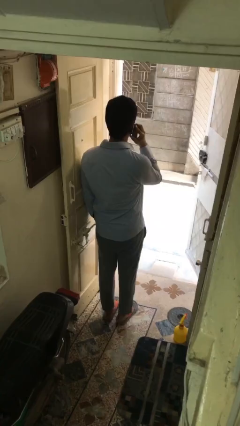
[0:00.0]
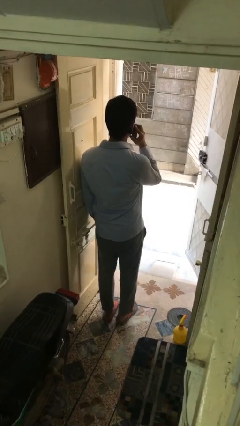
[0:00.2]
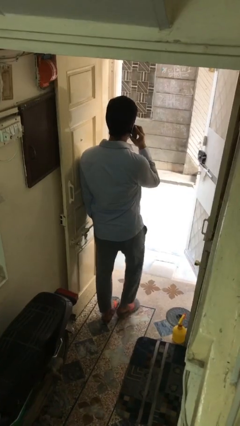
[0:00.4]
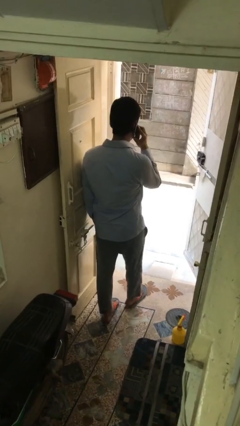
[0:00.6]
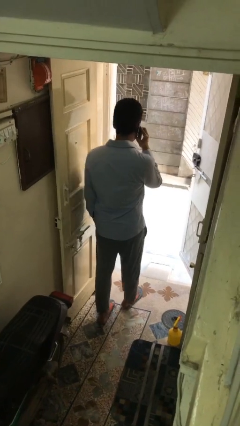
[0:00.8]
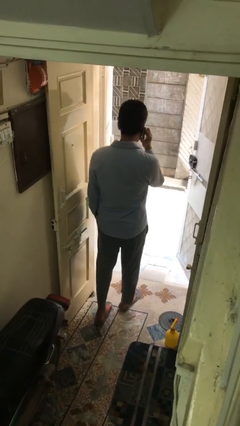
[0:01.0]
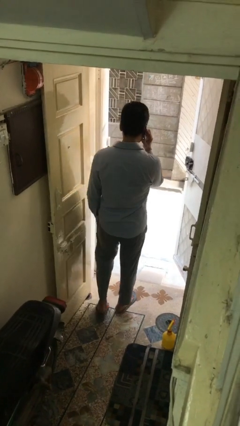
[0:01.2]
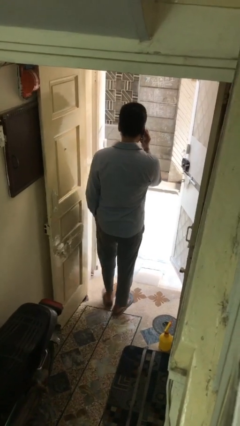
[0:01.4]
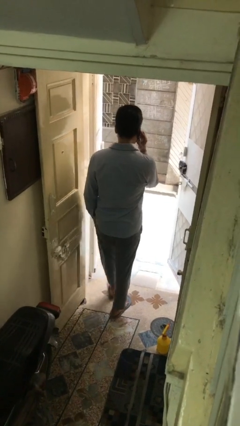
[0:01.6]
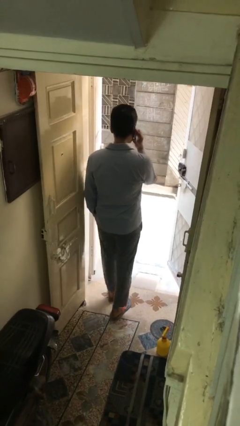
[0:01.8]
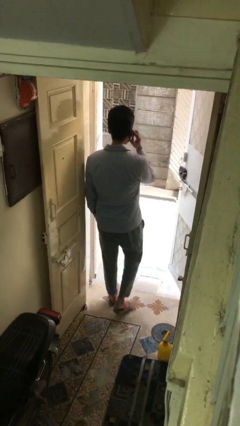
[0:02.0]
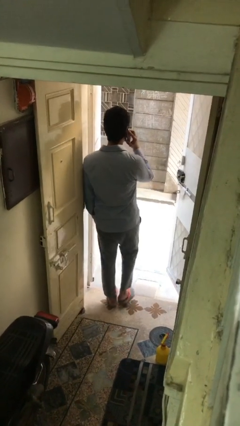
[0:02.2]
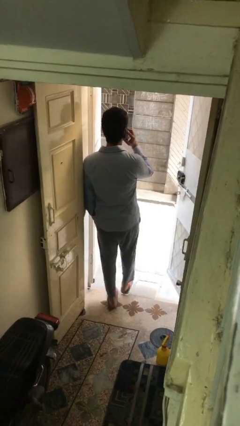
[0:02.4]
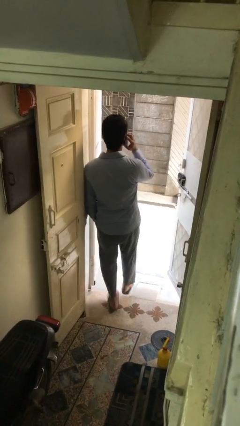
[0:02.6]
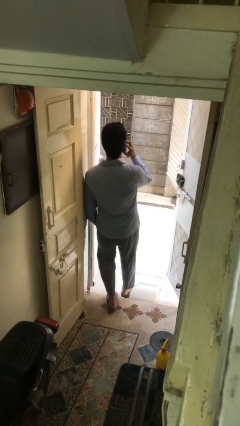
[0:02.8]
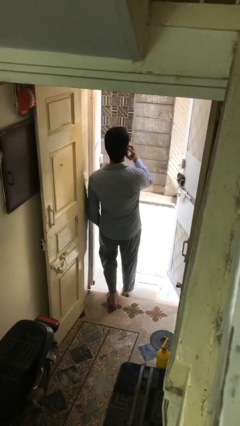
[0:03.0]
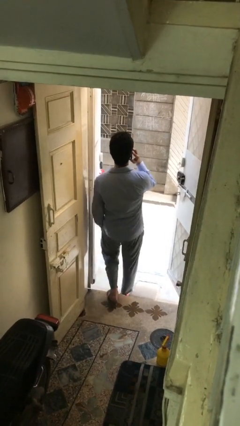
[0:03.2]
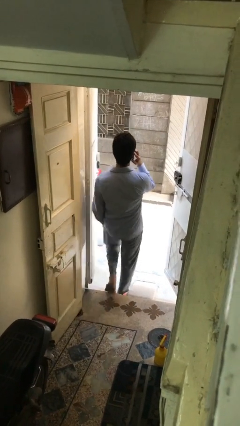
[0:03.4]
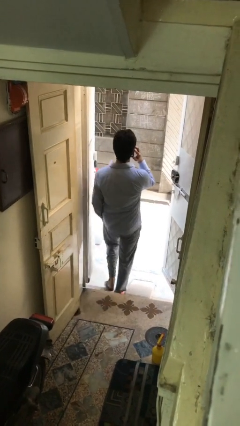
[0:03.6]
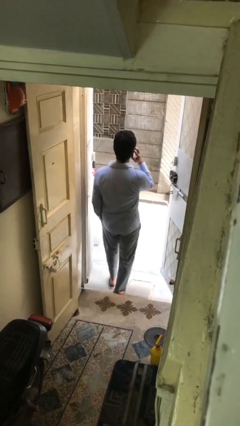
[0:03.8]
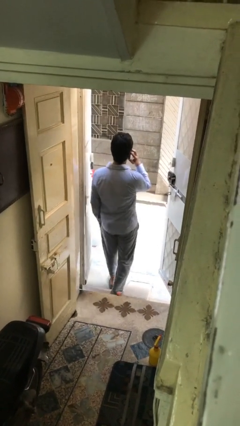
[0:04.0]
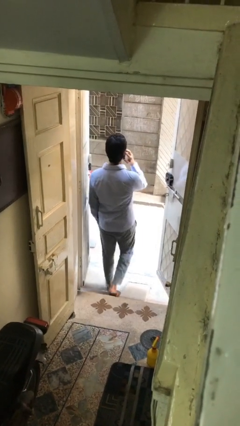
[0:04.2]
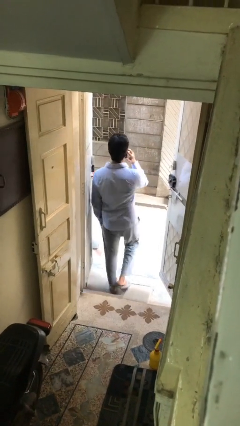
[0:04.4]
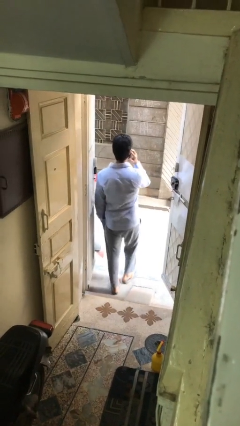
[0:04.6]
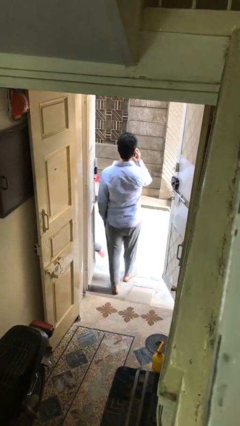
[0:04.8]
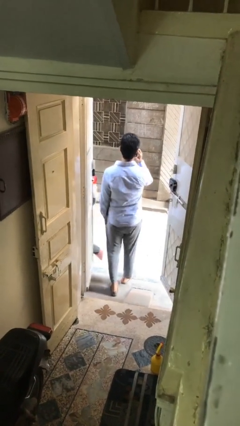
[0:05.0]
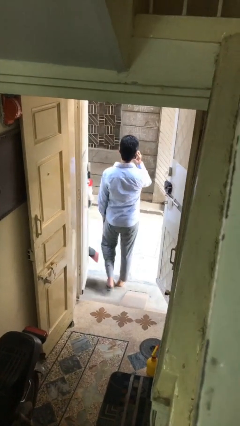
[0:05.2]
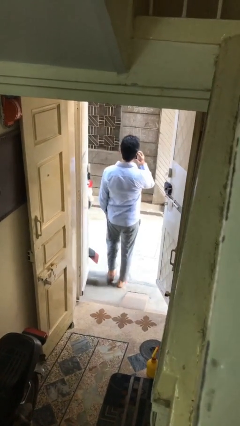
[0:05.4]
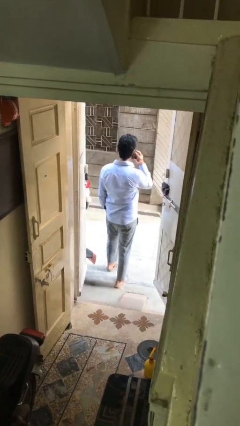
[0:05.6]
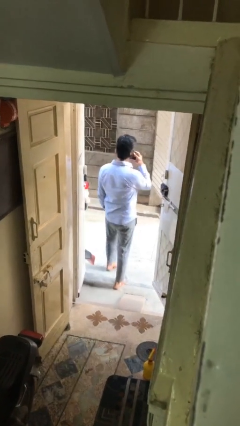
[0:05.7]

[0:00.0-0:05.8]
person exits scene through structure

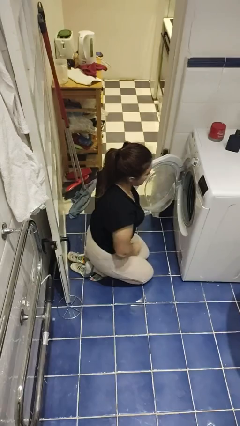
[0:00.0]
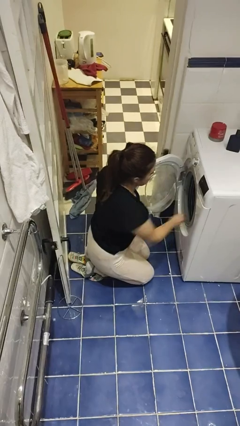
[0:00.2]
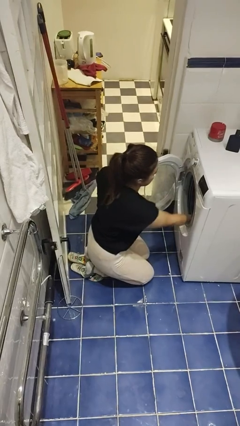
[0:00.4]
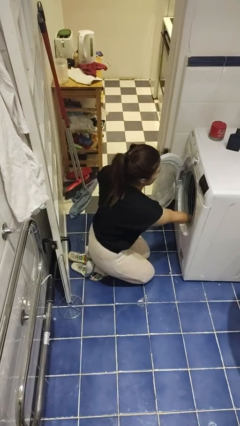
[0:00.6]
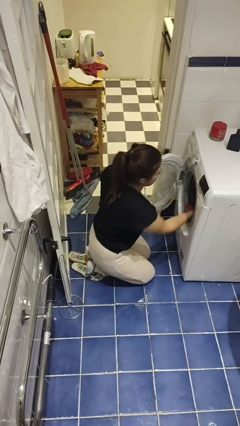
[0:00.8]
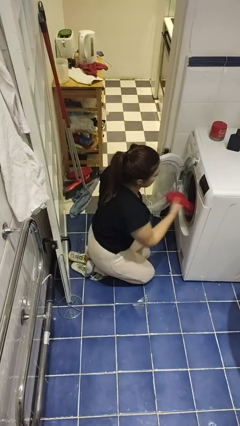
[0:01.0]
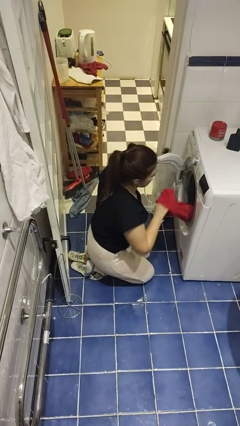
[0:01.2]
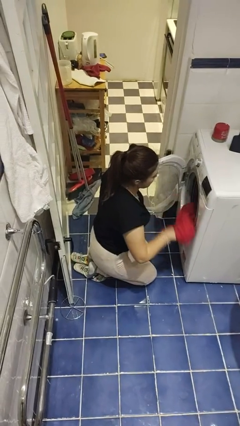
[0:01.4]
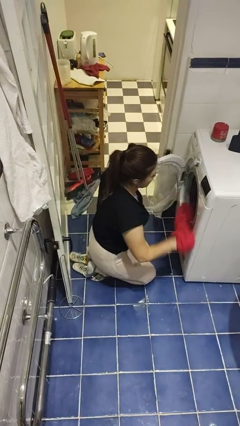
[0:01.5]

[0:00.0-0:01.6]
person unloads dryer

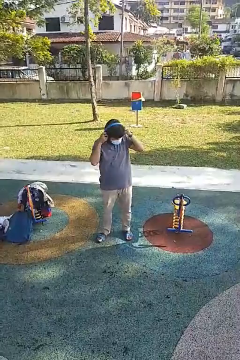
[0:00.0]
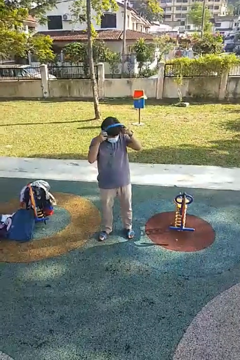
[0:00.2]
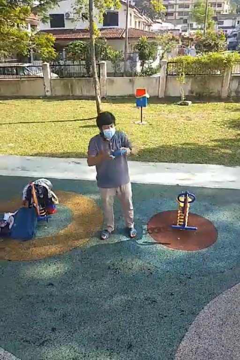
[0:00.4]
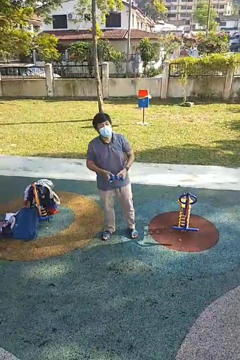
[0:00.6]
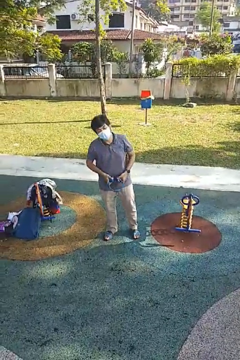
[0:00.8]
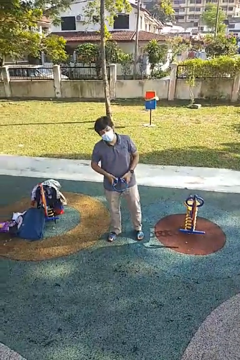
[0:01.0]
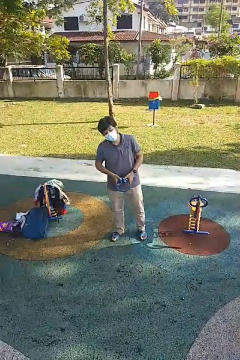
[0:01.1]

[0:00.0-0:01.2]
person puts on headphones

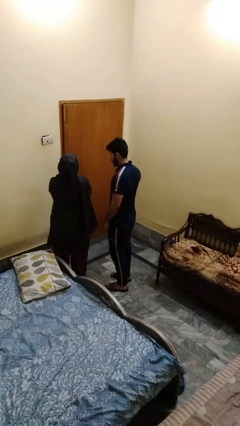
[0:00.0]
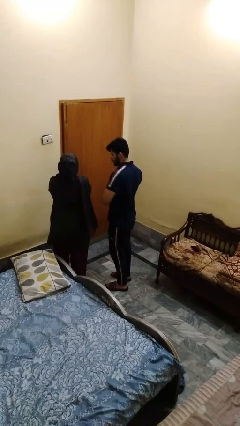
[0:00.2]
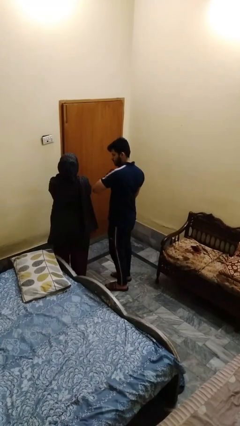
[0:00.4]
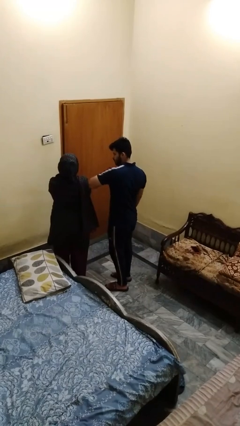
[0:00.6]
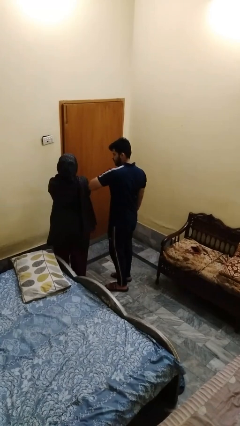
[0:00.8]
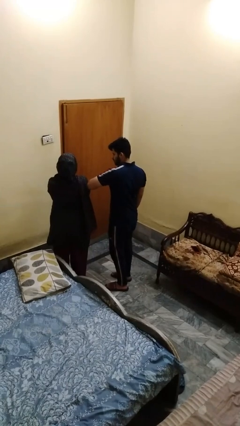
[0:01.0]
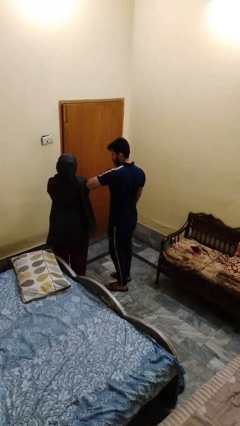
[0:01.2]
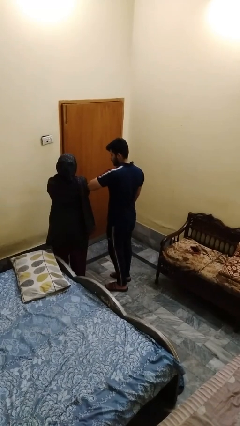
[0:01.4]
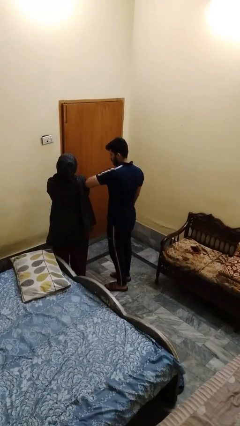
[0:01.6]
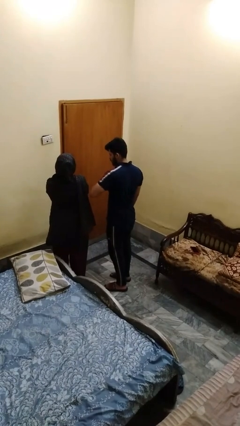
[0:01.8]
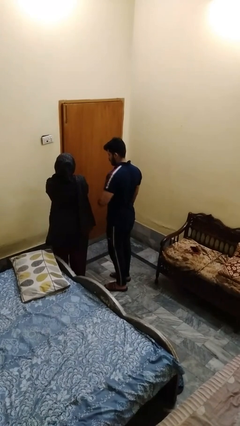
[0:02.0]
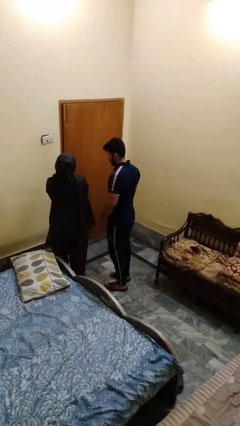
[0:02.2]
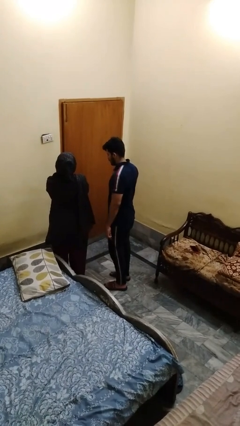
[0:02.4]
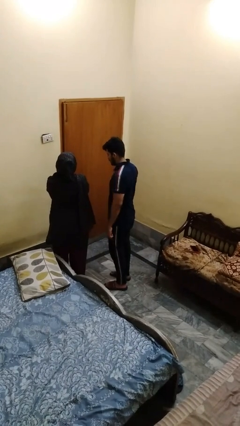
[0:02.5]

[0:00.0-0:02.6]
person nudges person with elbow

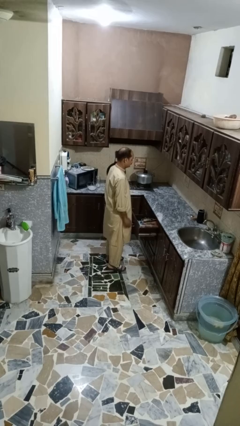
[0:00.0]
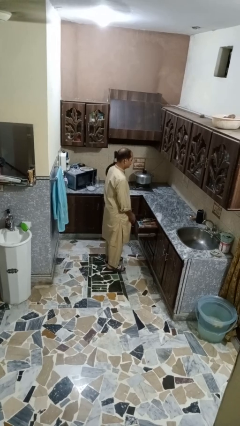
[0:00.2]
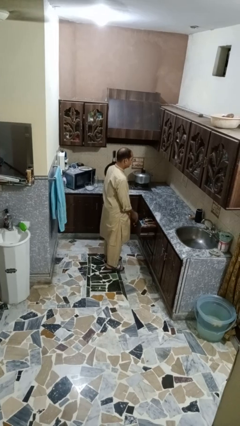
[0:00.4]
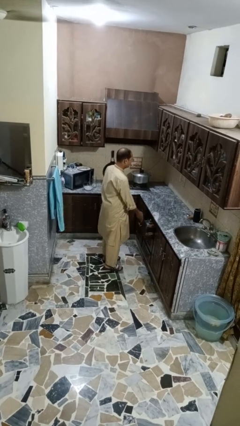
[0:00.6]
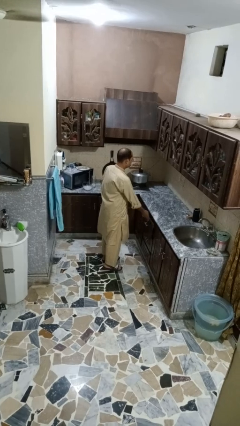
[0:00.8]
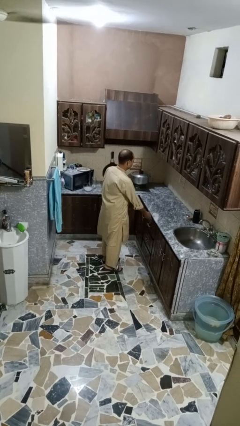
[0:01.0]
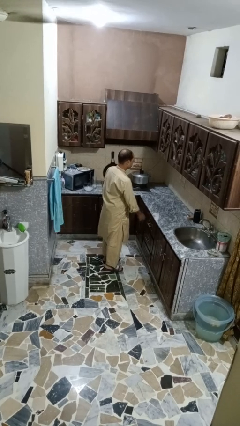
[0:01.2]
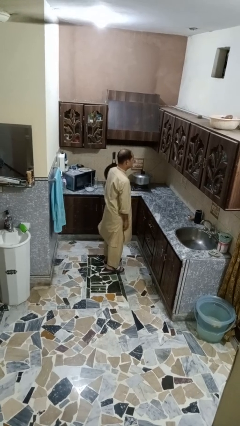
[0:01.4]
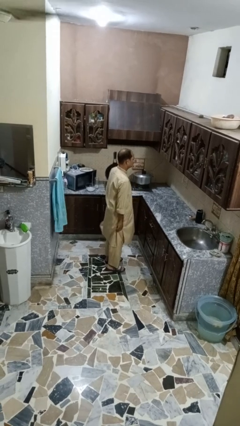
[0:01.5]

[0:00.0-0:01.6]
person closes kitchen drawer

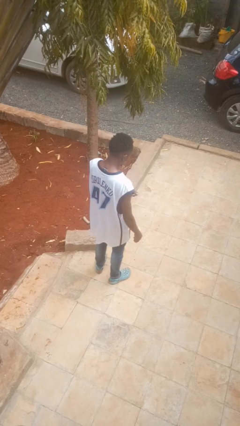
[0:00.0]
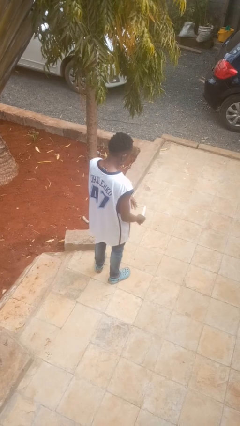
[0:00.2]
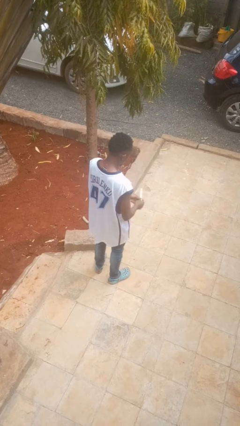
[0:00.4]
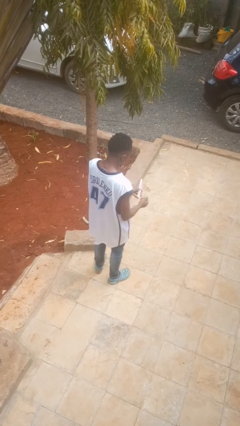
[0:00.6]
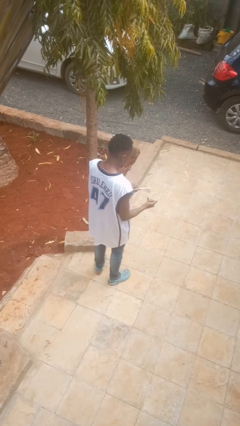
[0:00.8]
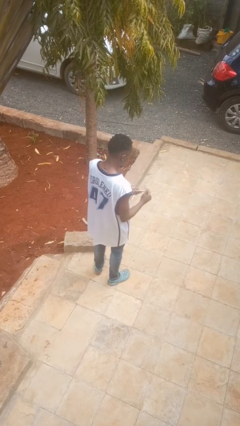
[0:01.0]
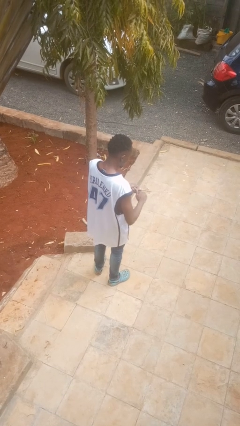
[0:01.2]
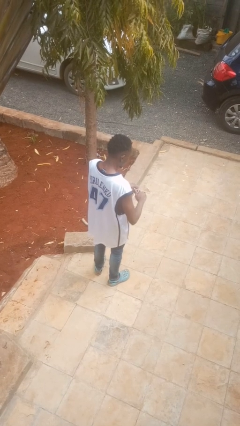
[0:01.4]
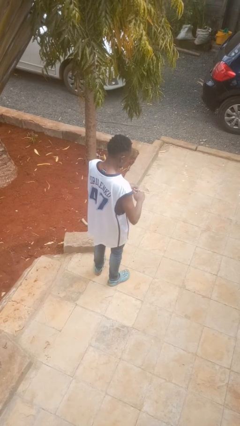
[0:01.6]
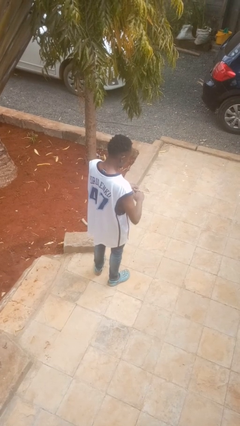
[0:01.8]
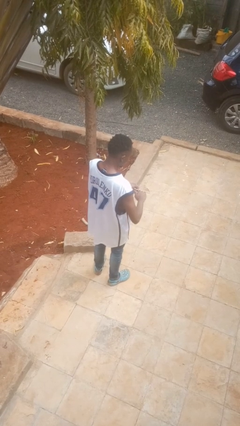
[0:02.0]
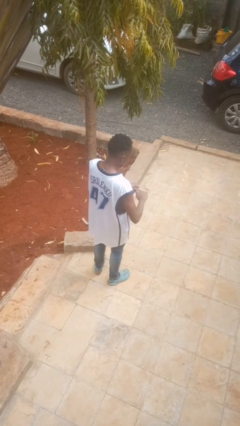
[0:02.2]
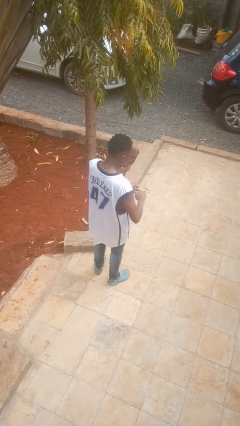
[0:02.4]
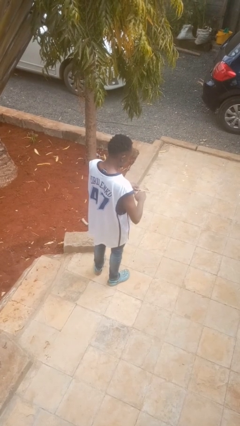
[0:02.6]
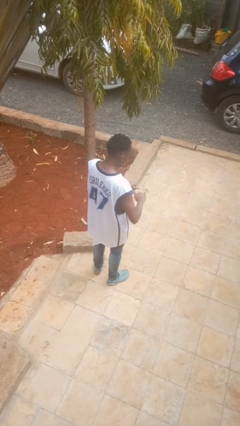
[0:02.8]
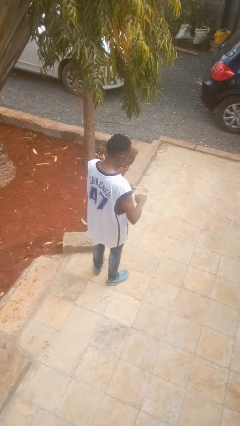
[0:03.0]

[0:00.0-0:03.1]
person files fingernails

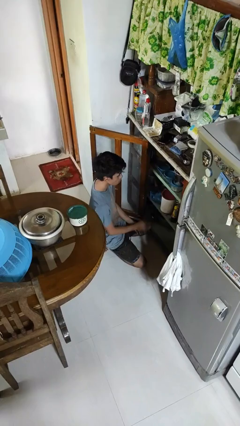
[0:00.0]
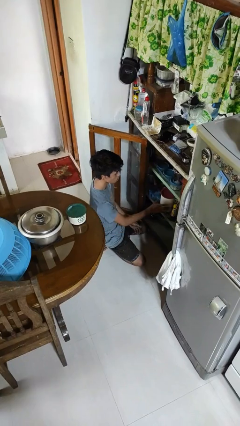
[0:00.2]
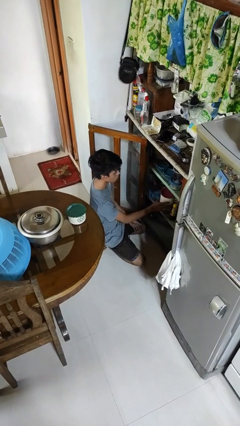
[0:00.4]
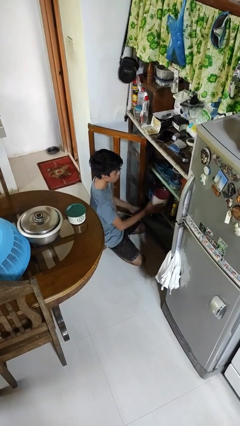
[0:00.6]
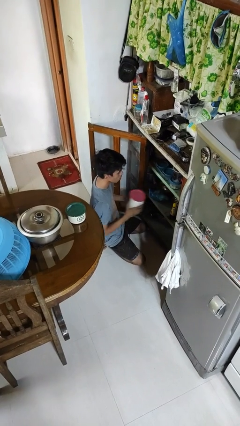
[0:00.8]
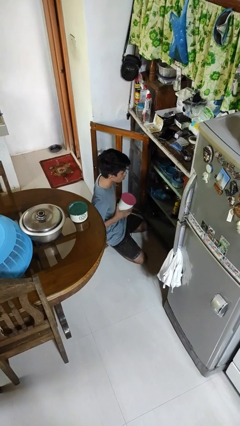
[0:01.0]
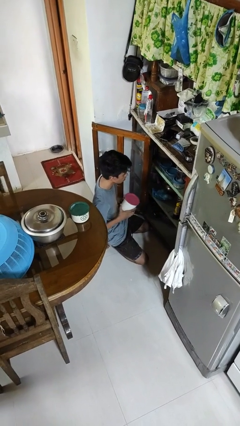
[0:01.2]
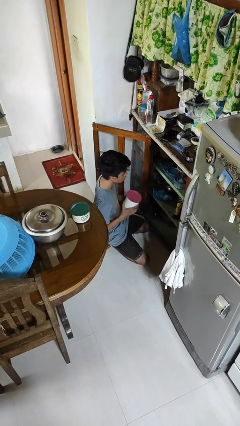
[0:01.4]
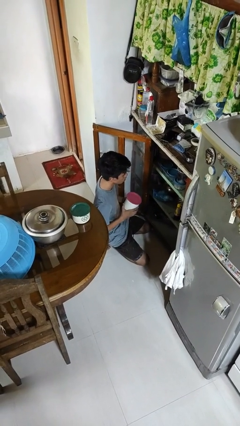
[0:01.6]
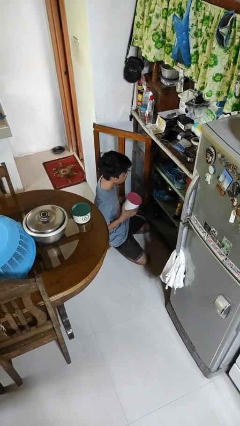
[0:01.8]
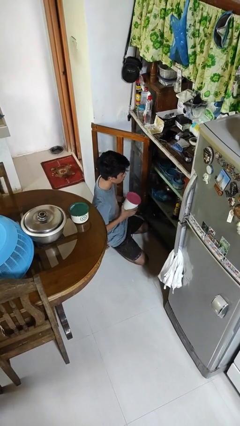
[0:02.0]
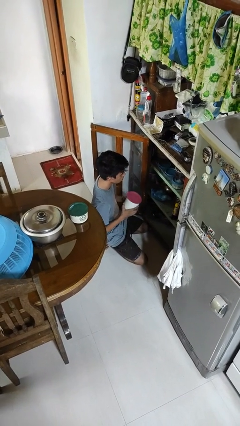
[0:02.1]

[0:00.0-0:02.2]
person picks up object from cabinet
